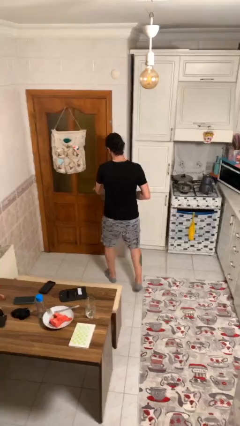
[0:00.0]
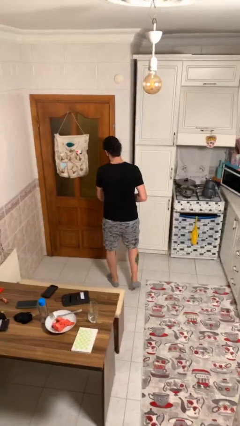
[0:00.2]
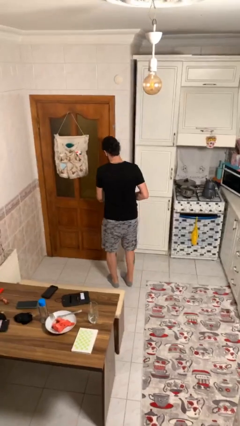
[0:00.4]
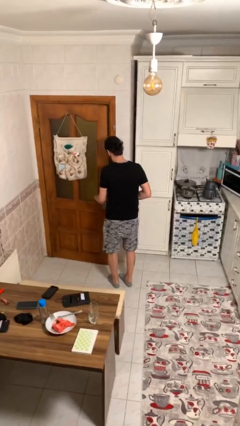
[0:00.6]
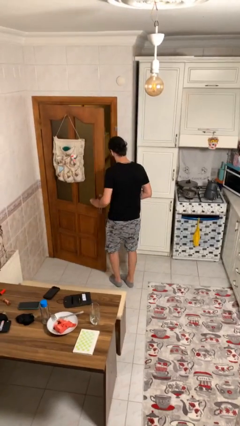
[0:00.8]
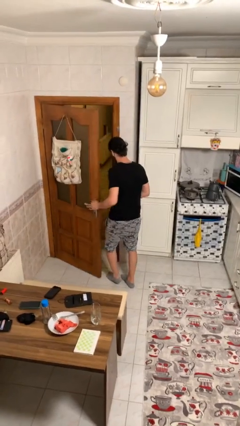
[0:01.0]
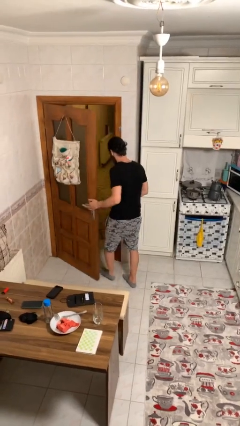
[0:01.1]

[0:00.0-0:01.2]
person opens facility door

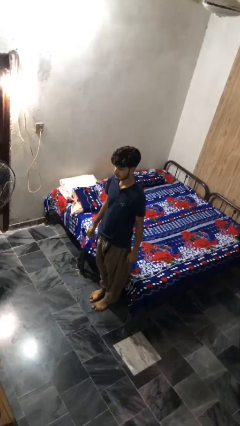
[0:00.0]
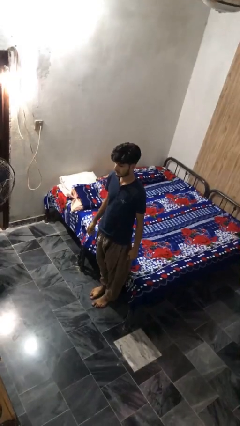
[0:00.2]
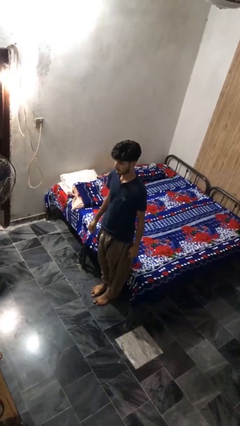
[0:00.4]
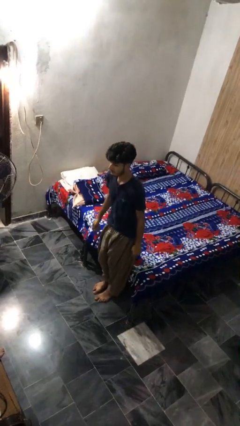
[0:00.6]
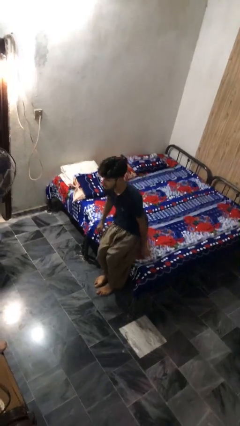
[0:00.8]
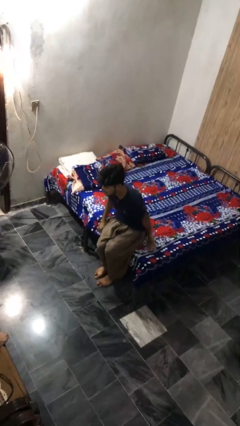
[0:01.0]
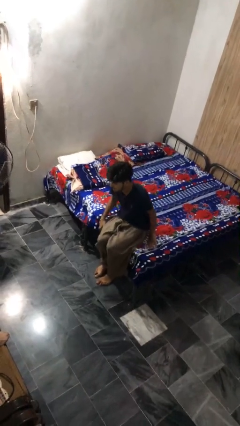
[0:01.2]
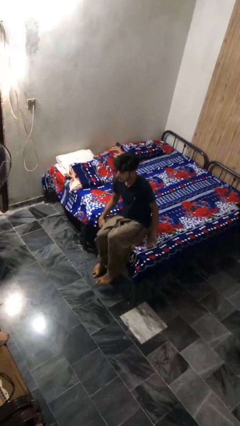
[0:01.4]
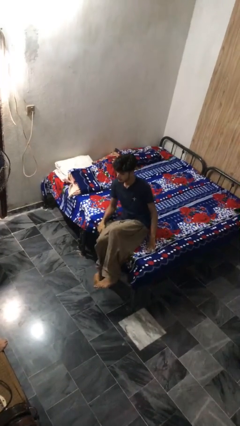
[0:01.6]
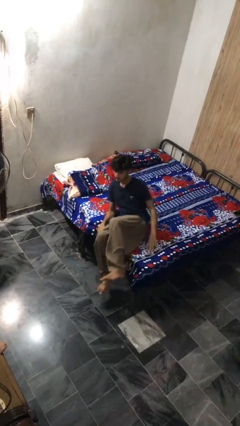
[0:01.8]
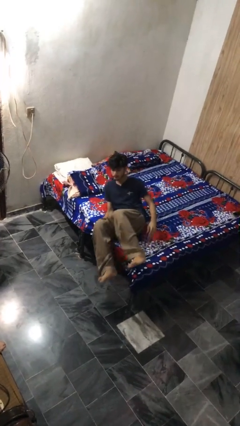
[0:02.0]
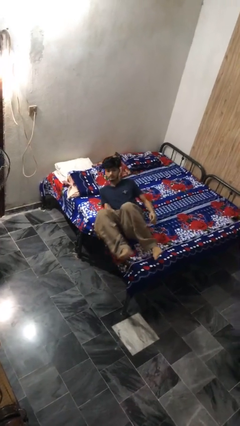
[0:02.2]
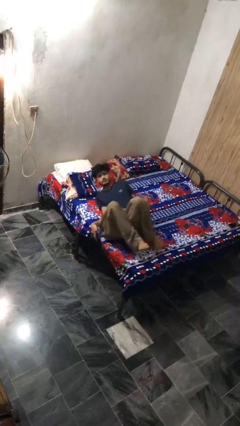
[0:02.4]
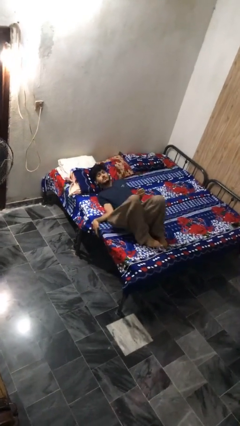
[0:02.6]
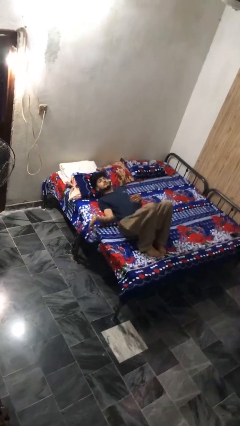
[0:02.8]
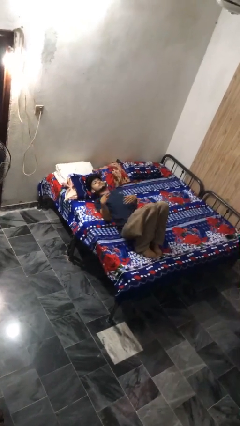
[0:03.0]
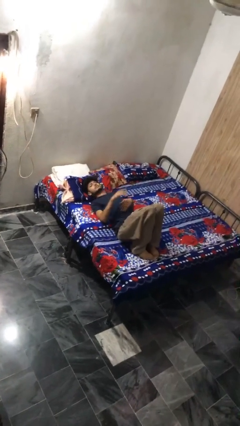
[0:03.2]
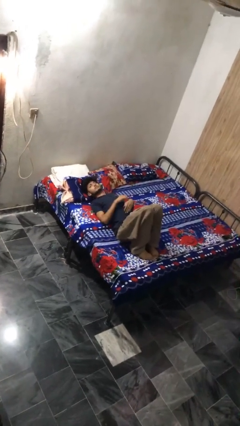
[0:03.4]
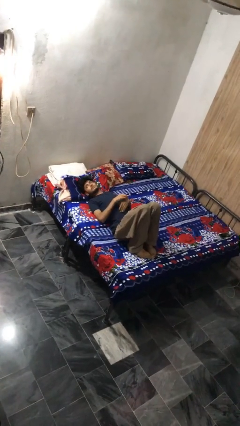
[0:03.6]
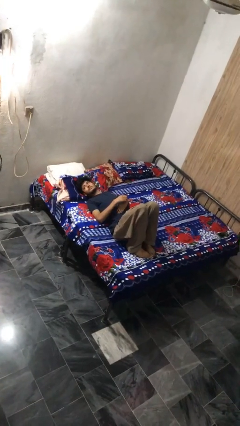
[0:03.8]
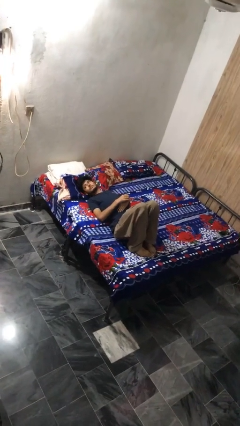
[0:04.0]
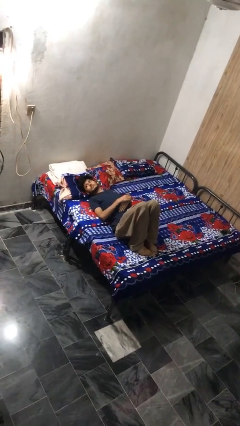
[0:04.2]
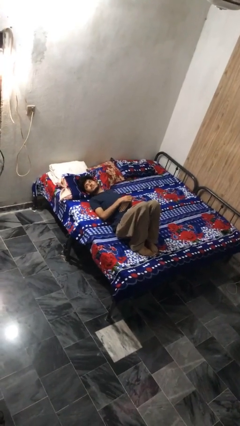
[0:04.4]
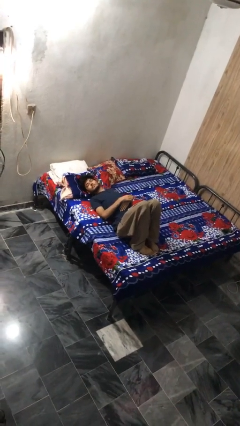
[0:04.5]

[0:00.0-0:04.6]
person lies down on bed

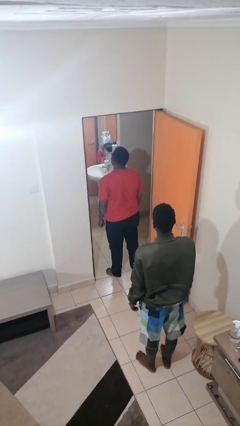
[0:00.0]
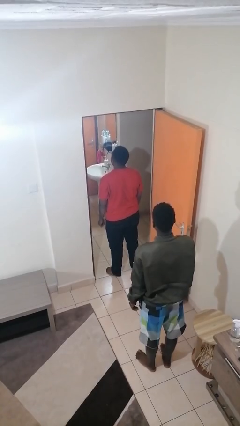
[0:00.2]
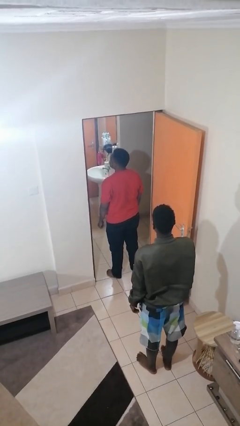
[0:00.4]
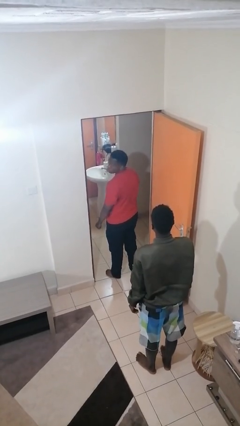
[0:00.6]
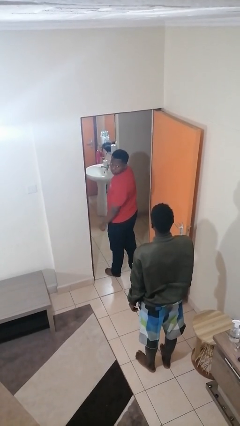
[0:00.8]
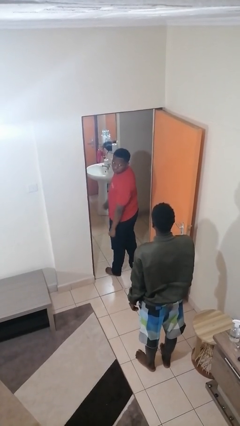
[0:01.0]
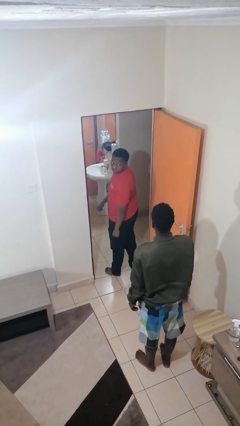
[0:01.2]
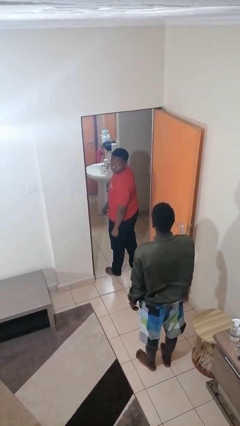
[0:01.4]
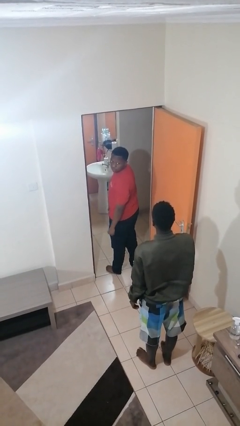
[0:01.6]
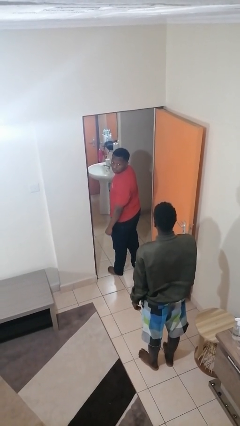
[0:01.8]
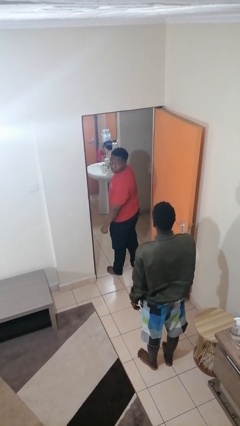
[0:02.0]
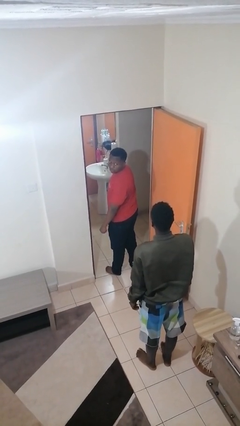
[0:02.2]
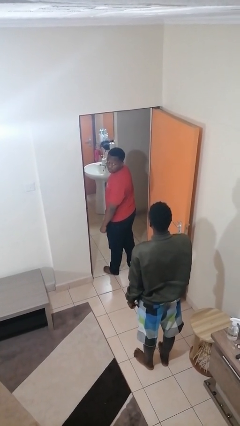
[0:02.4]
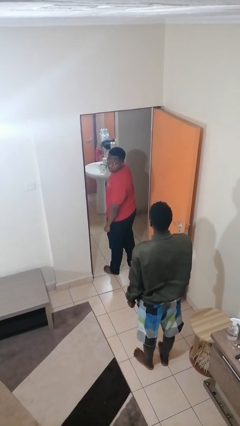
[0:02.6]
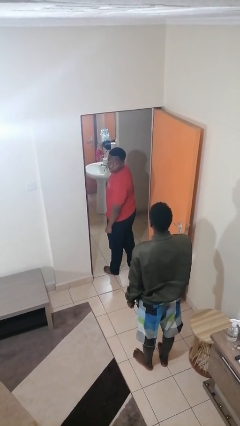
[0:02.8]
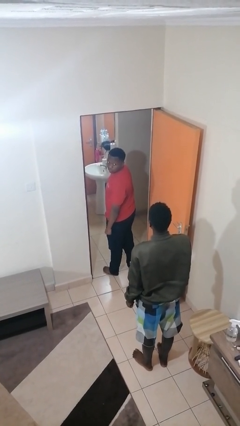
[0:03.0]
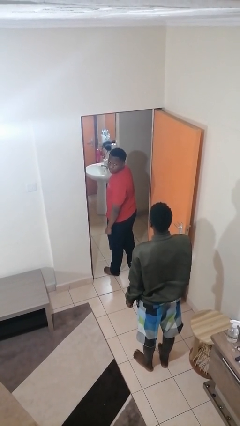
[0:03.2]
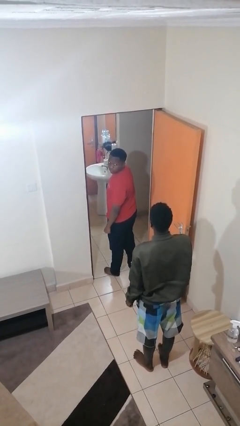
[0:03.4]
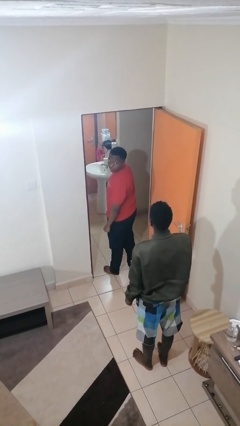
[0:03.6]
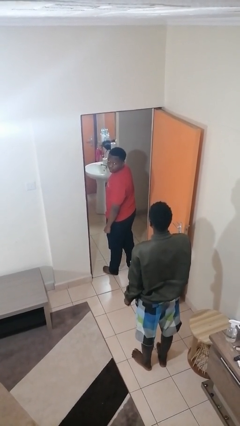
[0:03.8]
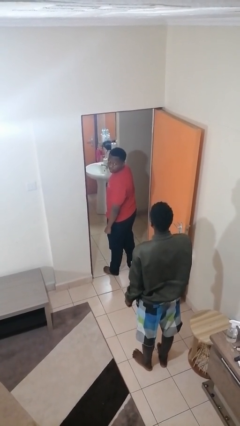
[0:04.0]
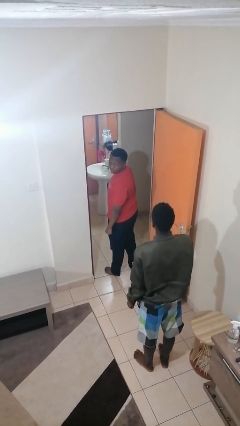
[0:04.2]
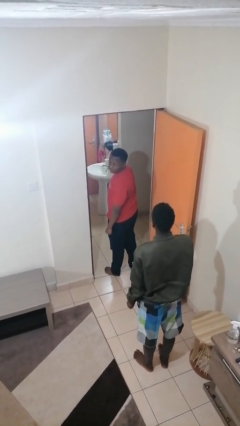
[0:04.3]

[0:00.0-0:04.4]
person looks over shoulder

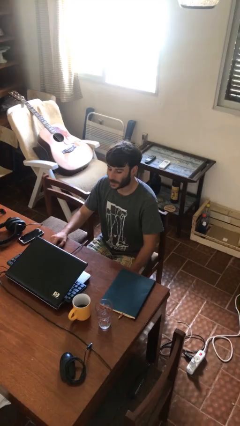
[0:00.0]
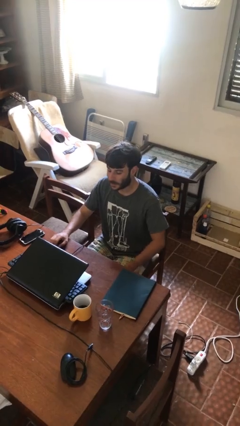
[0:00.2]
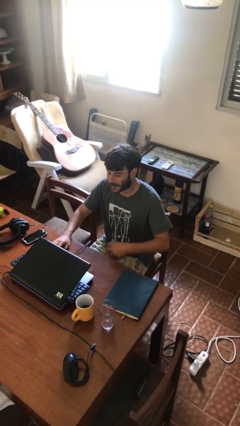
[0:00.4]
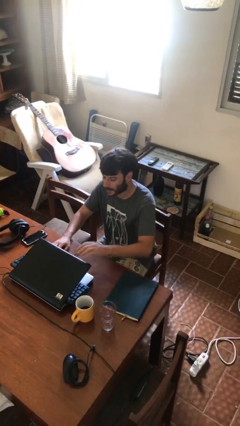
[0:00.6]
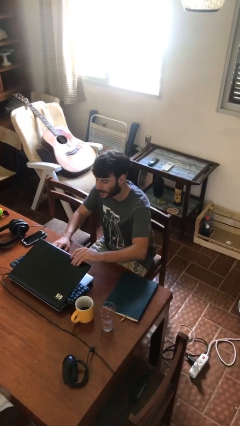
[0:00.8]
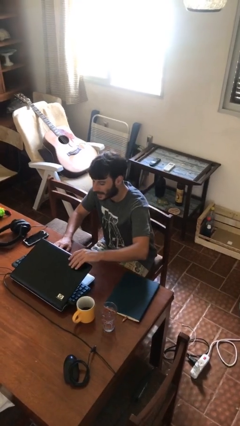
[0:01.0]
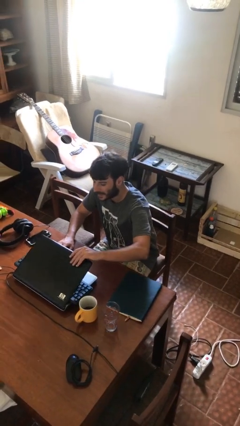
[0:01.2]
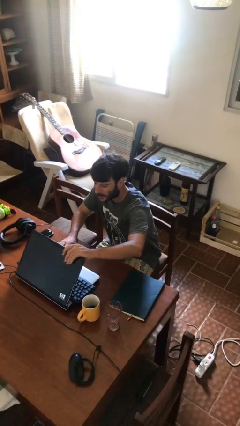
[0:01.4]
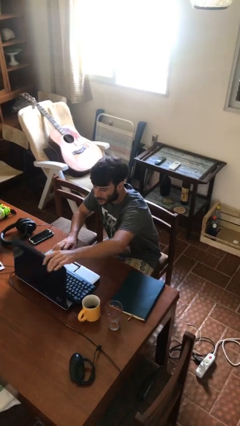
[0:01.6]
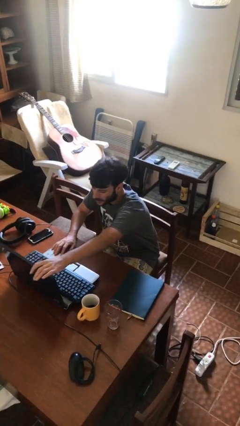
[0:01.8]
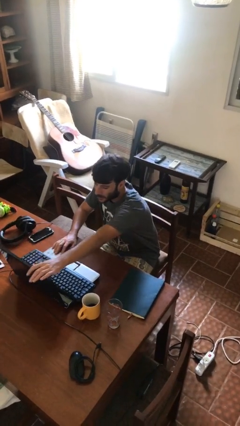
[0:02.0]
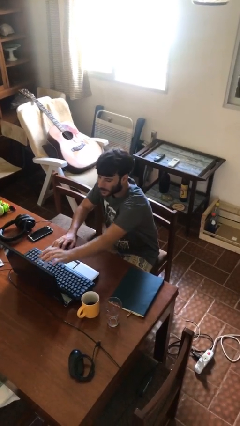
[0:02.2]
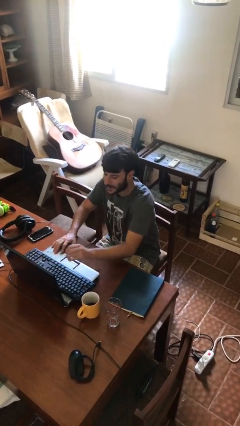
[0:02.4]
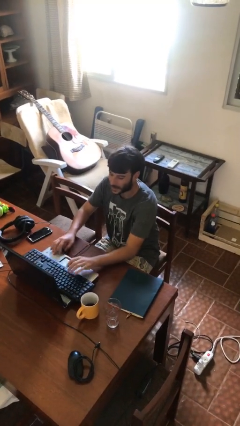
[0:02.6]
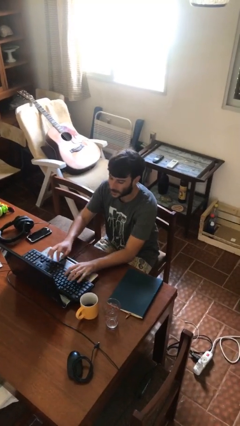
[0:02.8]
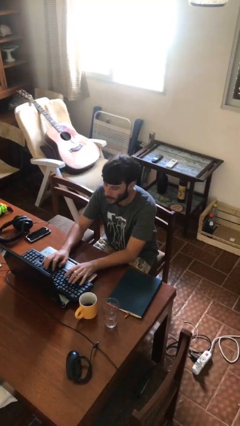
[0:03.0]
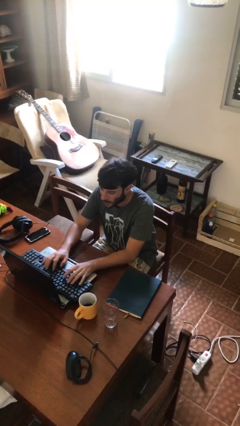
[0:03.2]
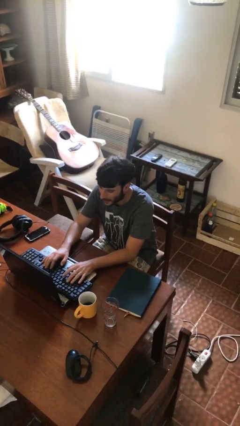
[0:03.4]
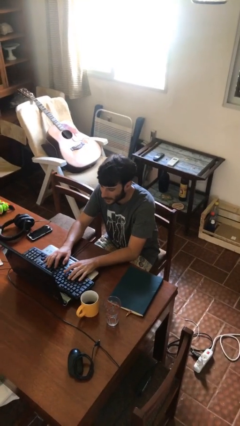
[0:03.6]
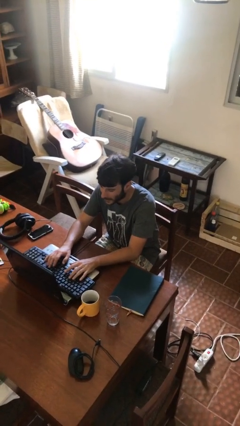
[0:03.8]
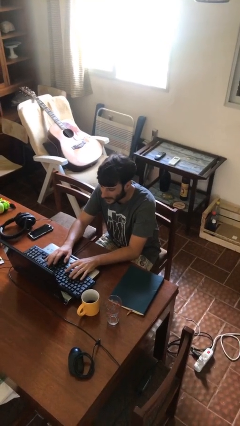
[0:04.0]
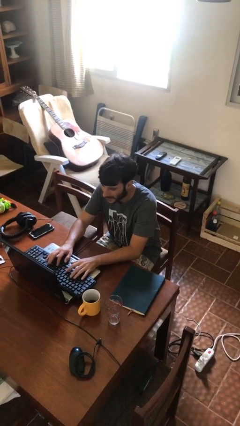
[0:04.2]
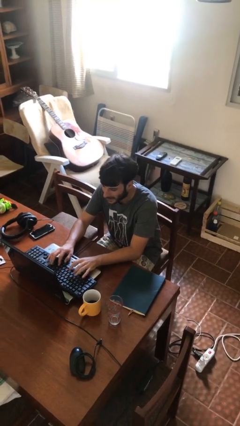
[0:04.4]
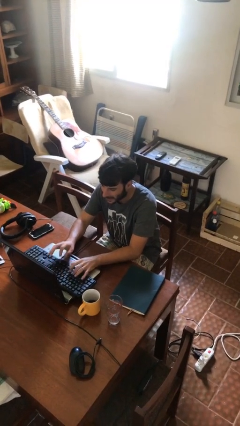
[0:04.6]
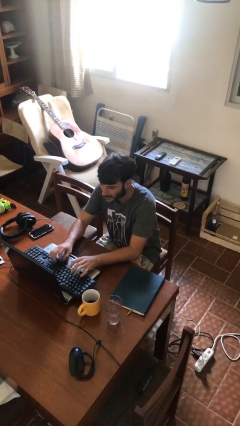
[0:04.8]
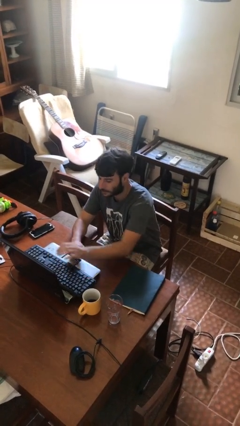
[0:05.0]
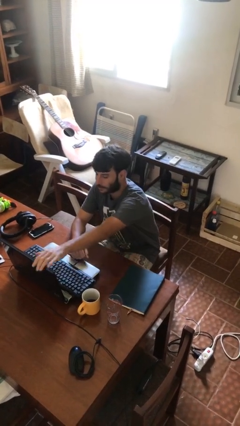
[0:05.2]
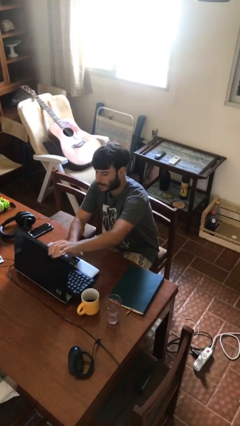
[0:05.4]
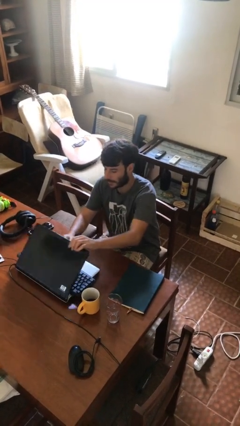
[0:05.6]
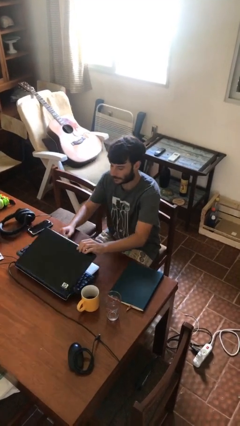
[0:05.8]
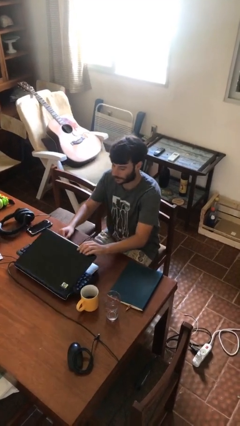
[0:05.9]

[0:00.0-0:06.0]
person interacts with laptop

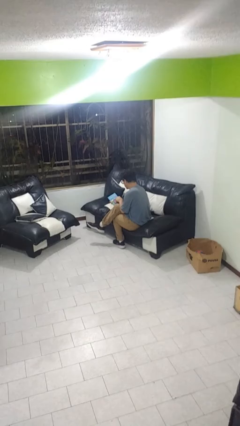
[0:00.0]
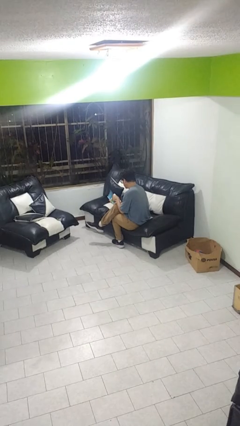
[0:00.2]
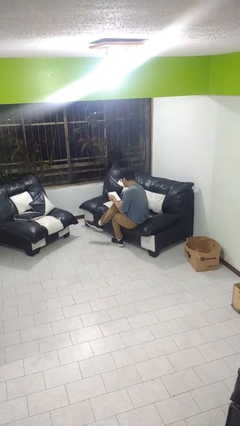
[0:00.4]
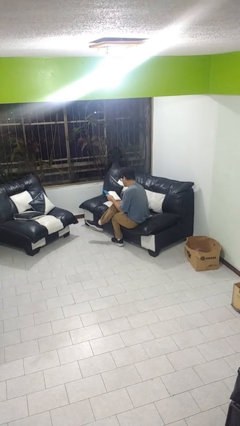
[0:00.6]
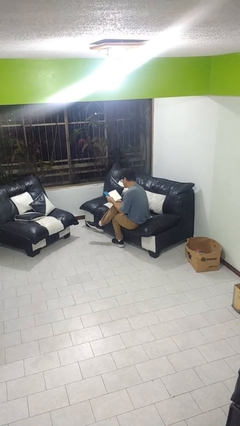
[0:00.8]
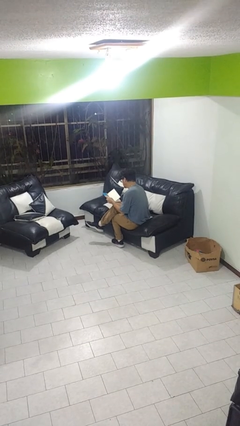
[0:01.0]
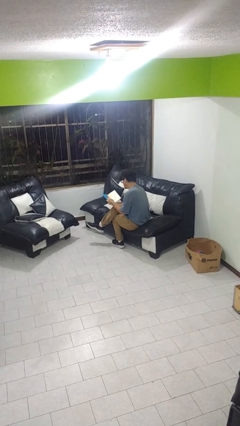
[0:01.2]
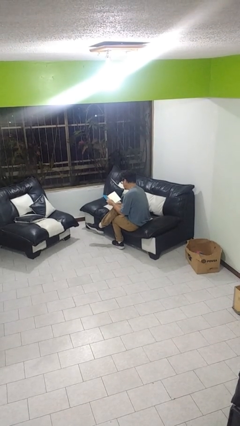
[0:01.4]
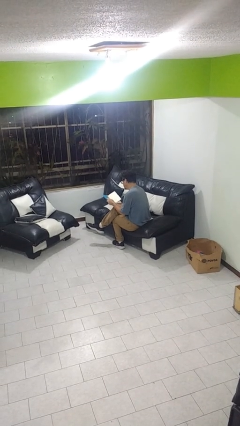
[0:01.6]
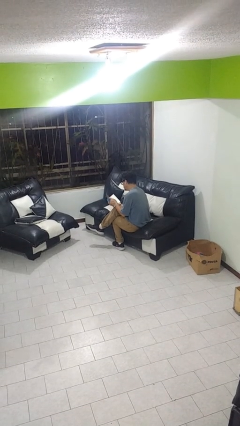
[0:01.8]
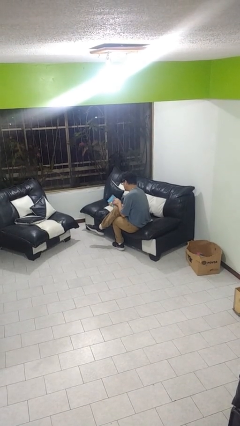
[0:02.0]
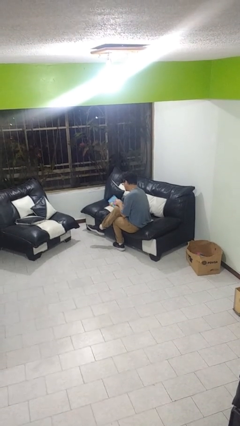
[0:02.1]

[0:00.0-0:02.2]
person reads book
